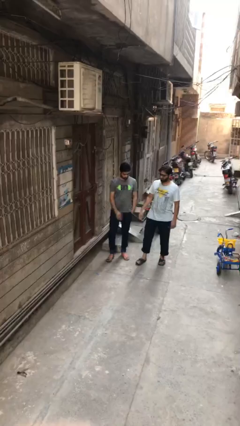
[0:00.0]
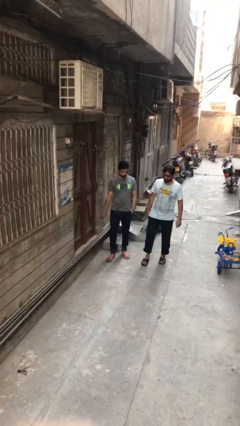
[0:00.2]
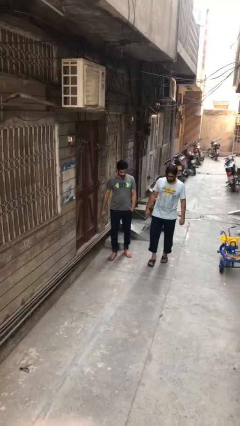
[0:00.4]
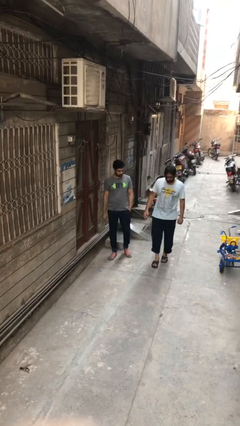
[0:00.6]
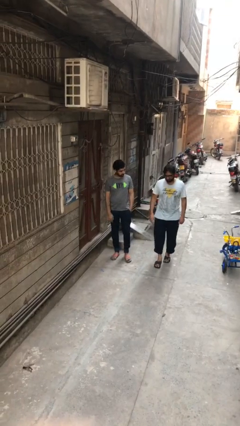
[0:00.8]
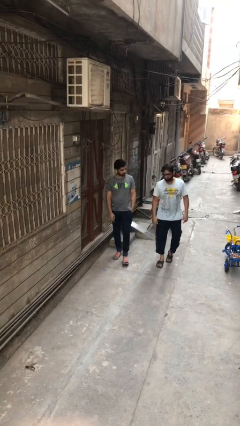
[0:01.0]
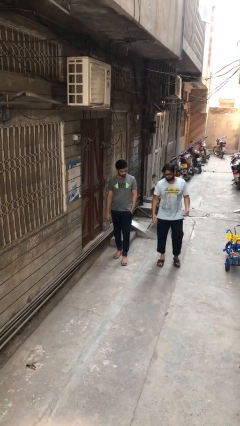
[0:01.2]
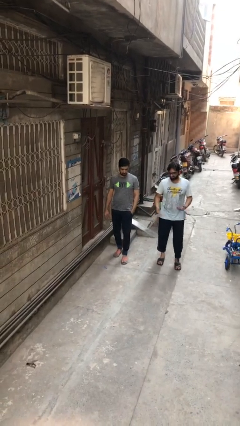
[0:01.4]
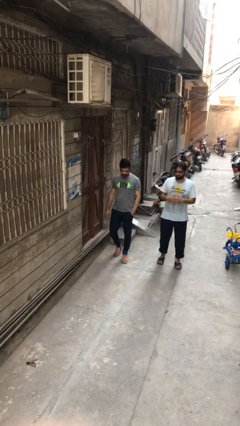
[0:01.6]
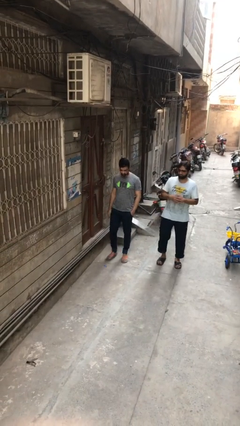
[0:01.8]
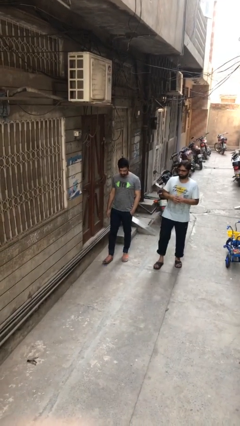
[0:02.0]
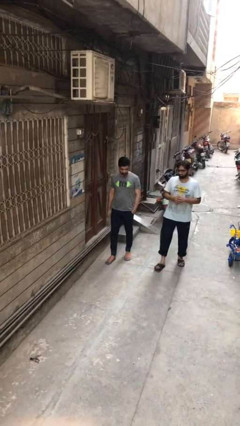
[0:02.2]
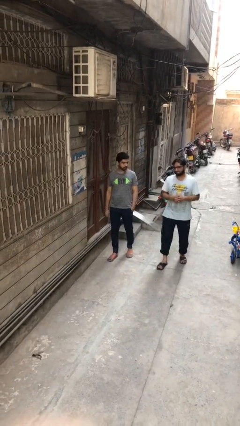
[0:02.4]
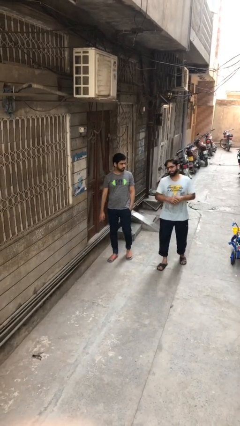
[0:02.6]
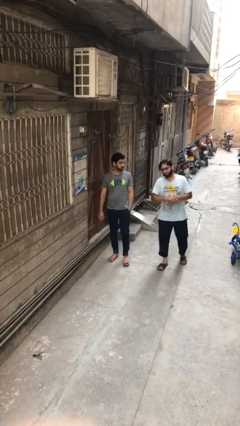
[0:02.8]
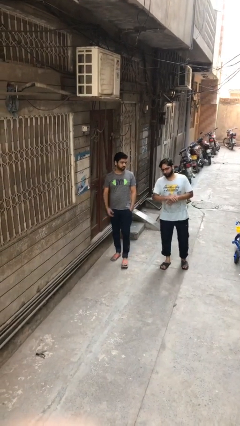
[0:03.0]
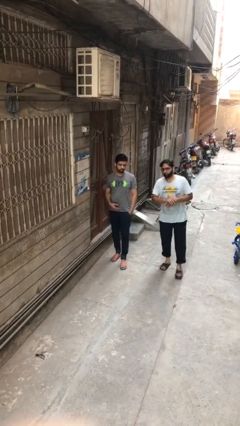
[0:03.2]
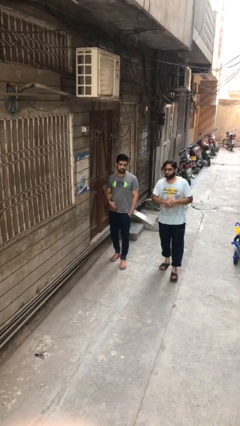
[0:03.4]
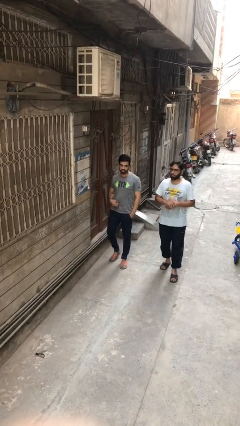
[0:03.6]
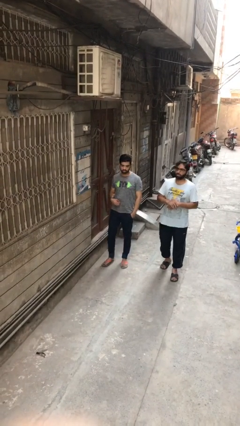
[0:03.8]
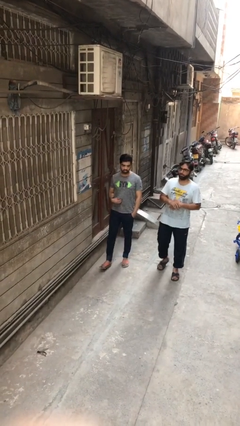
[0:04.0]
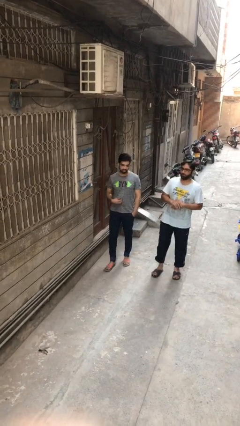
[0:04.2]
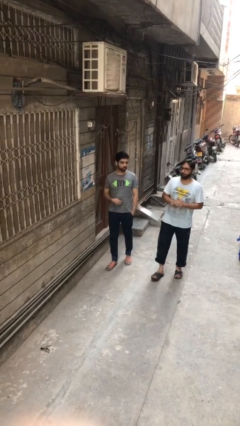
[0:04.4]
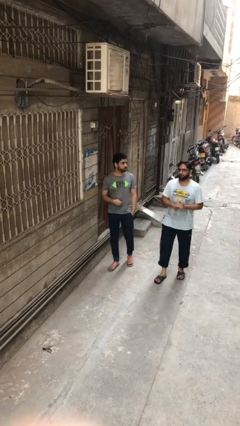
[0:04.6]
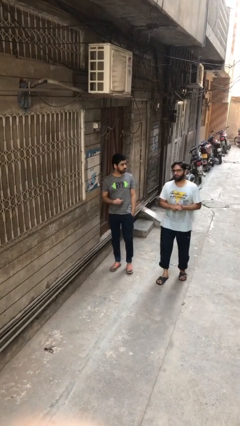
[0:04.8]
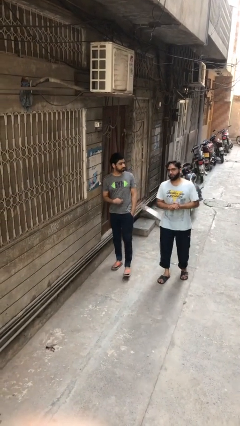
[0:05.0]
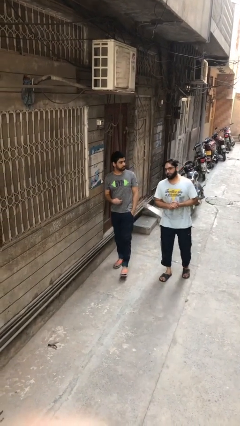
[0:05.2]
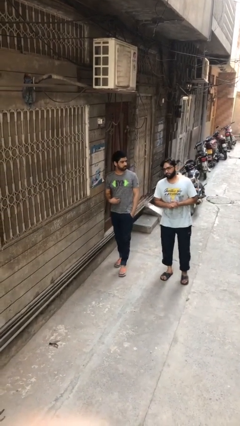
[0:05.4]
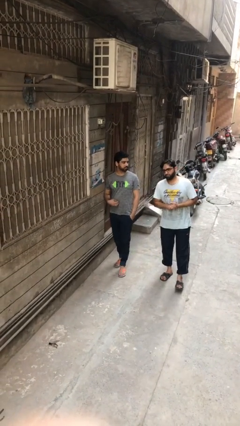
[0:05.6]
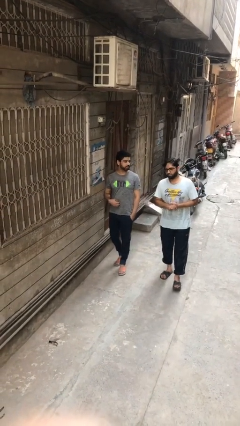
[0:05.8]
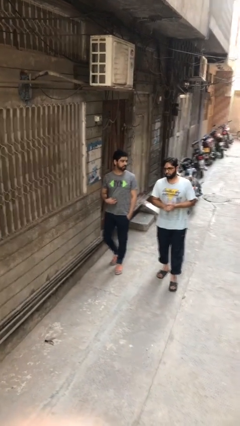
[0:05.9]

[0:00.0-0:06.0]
person talks to person

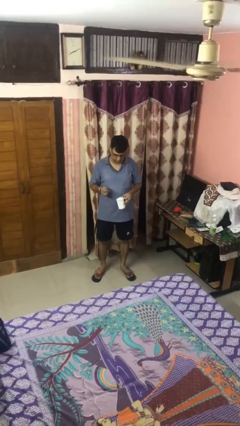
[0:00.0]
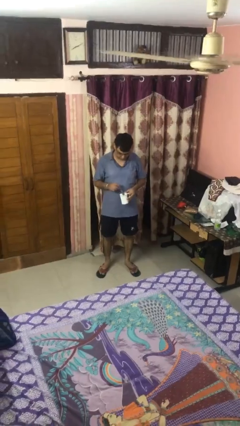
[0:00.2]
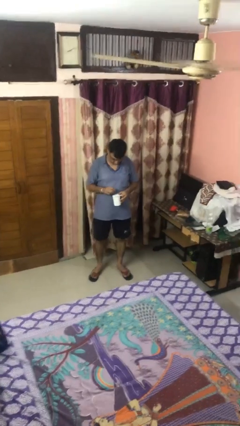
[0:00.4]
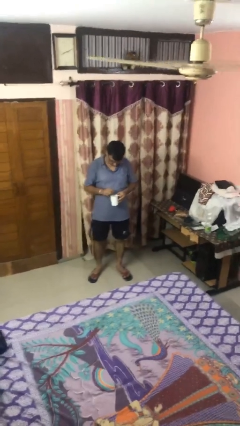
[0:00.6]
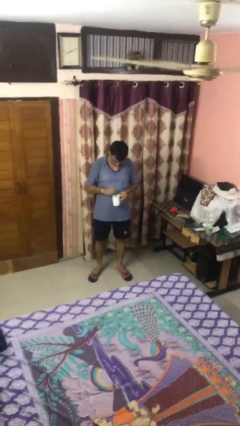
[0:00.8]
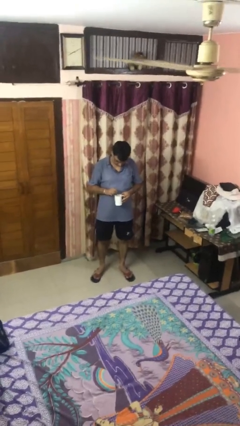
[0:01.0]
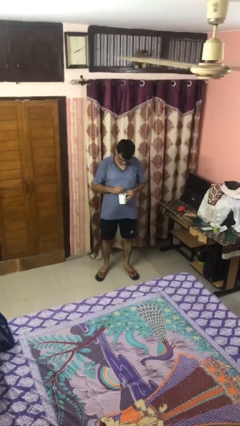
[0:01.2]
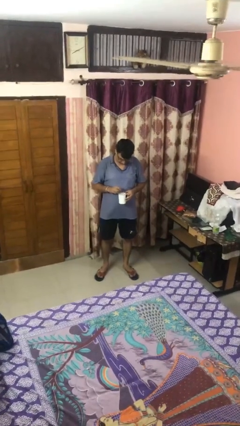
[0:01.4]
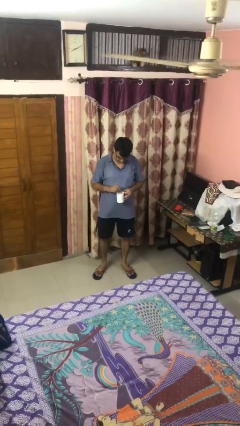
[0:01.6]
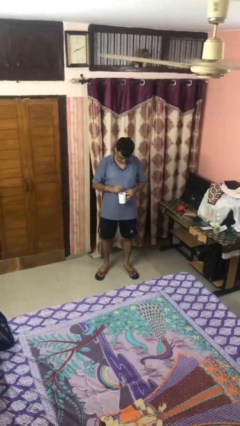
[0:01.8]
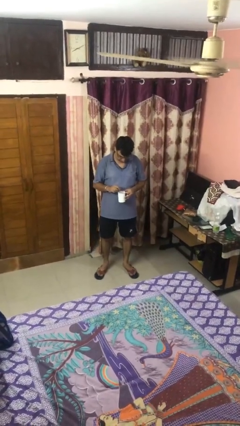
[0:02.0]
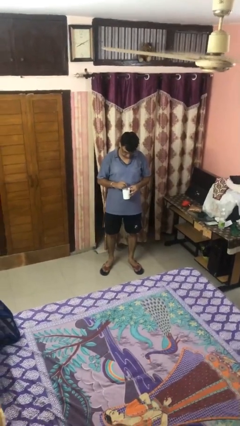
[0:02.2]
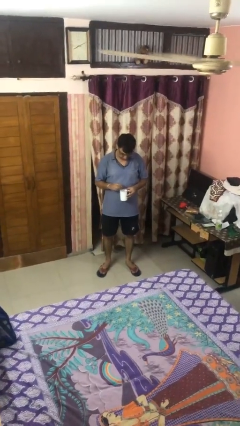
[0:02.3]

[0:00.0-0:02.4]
person stirs mug

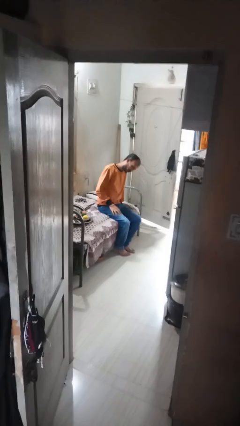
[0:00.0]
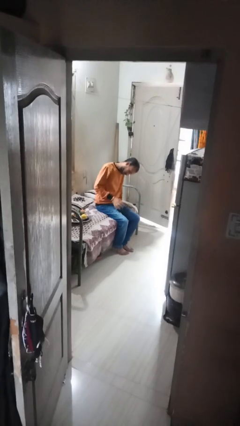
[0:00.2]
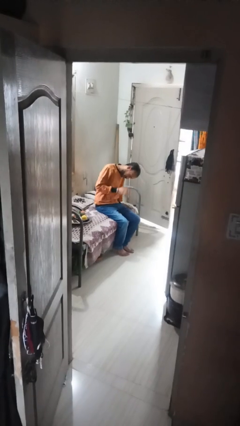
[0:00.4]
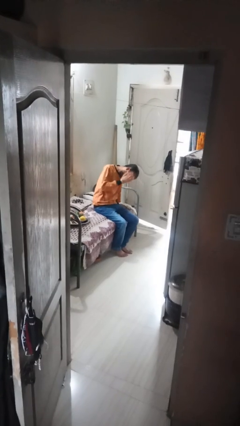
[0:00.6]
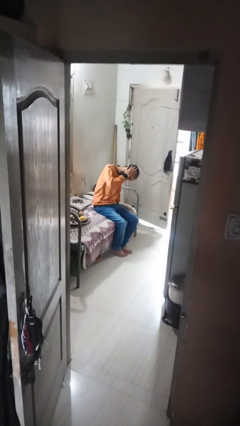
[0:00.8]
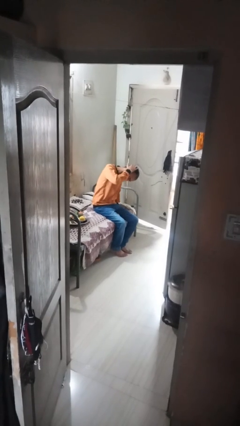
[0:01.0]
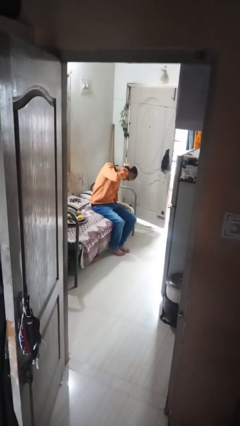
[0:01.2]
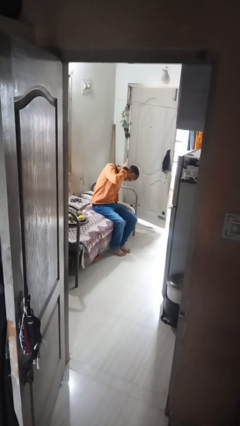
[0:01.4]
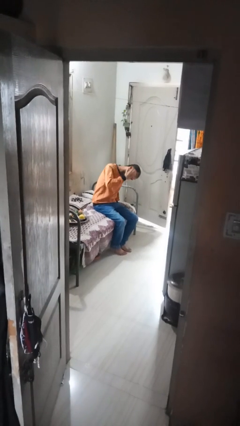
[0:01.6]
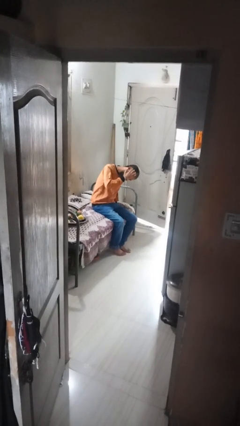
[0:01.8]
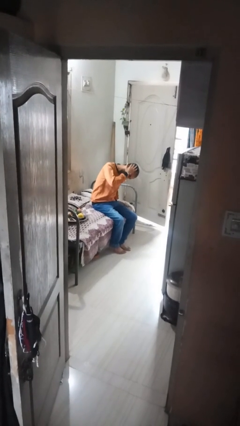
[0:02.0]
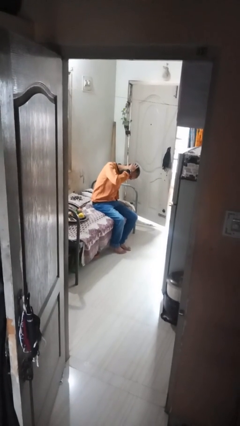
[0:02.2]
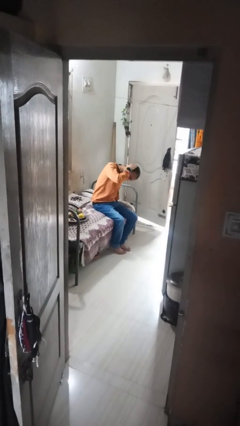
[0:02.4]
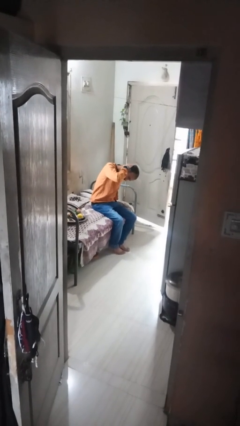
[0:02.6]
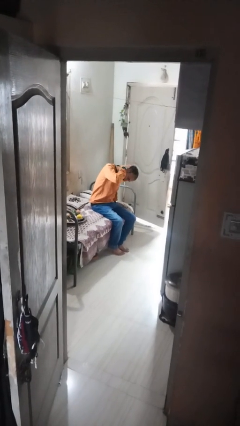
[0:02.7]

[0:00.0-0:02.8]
person strokes hair

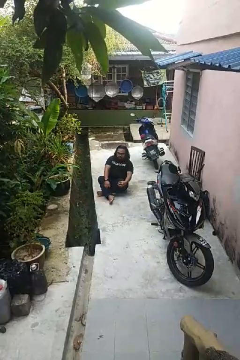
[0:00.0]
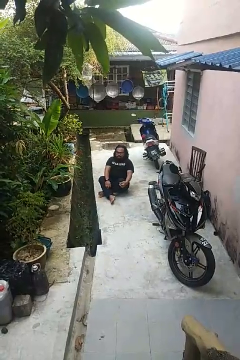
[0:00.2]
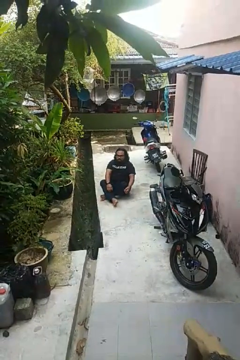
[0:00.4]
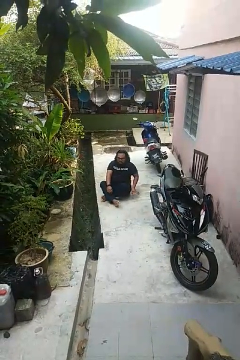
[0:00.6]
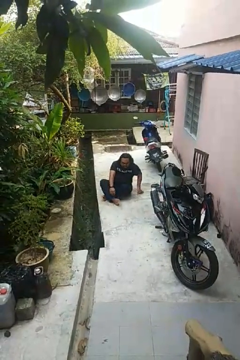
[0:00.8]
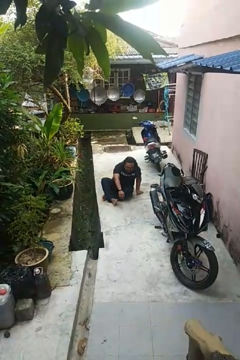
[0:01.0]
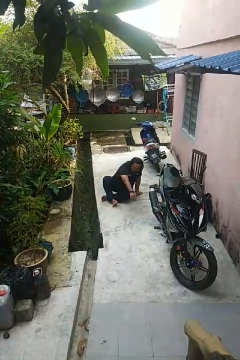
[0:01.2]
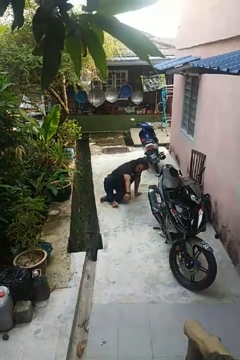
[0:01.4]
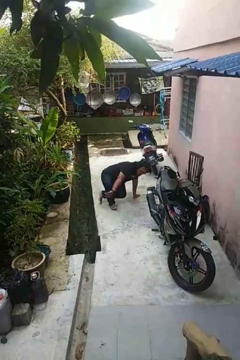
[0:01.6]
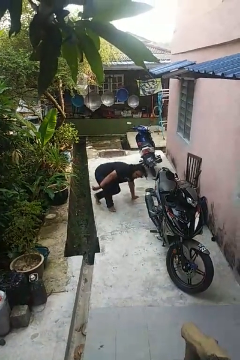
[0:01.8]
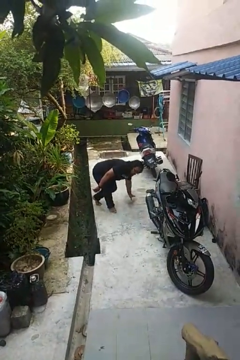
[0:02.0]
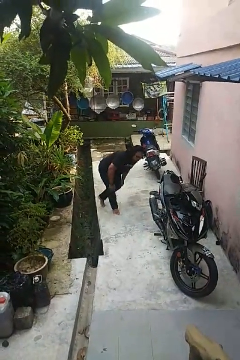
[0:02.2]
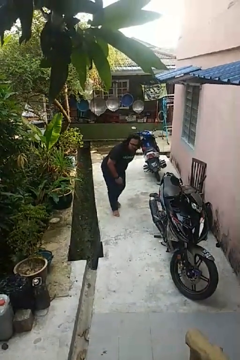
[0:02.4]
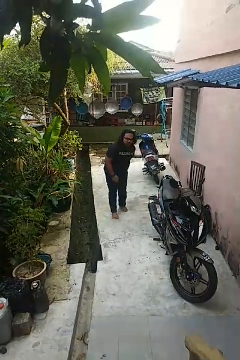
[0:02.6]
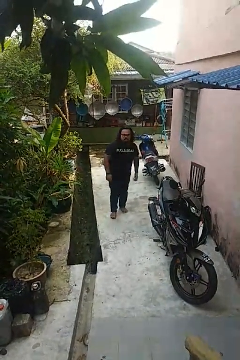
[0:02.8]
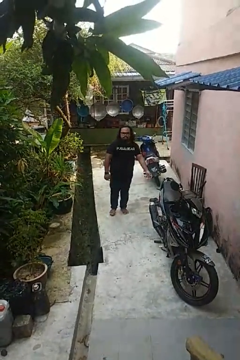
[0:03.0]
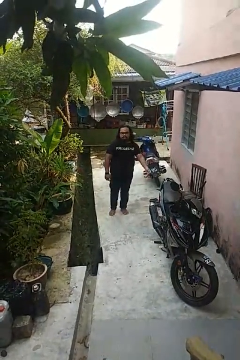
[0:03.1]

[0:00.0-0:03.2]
person stands up from floor

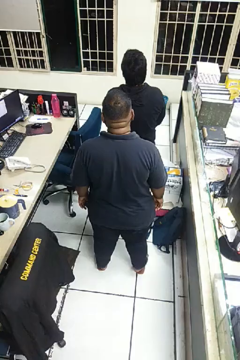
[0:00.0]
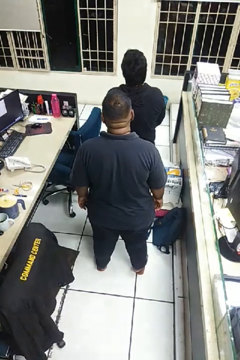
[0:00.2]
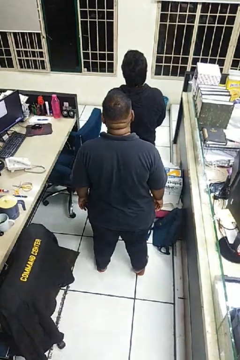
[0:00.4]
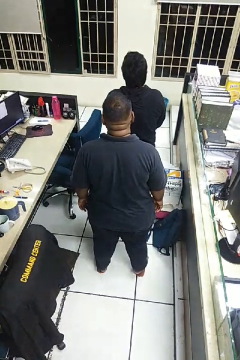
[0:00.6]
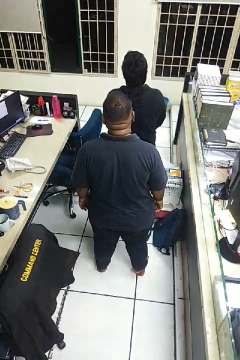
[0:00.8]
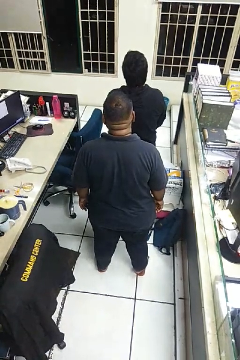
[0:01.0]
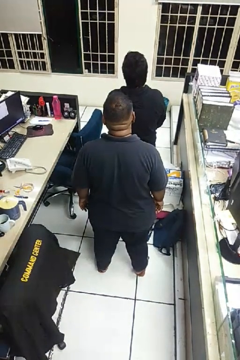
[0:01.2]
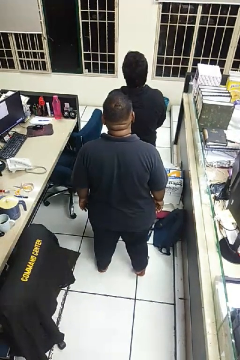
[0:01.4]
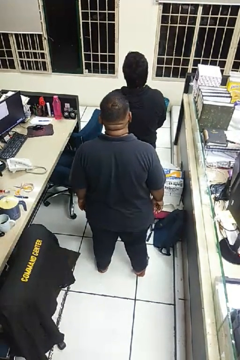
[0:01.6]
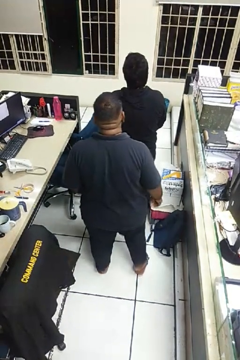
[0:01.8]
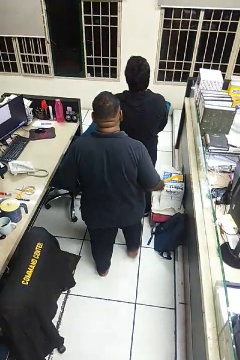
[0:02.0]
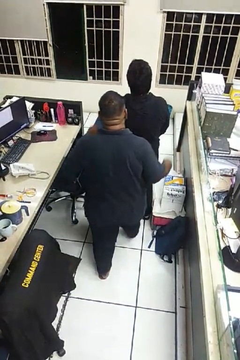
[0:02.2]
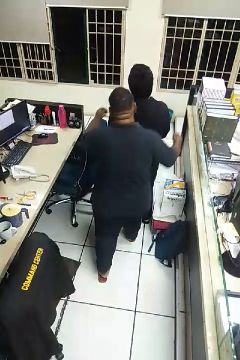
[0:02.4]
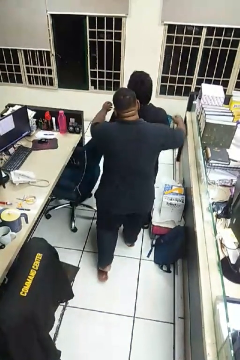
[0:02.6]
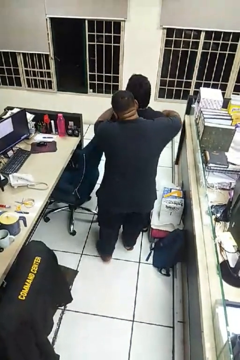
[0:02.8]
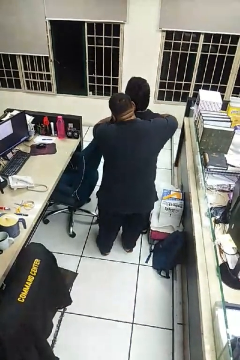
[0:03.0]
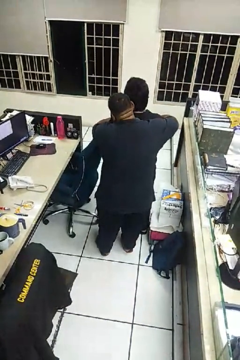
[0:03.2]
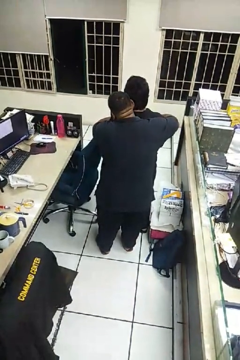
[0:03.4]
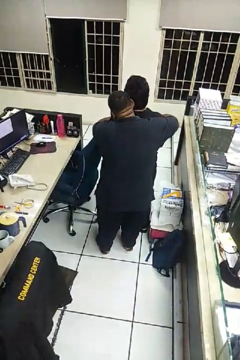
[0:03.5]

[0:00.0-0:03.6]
person hugs person from behind

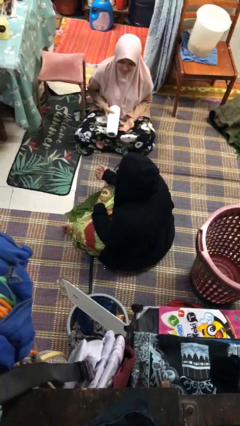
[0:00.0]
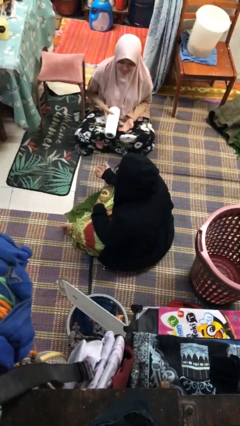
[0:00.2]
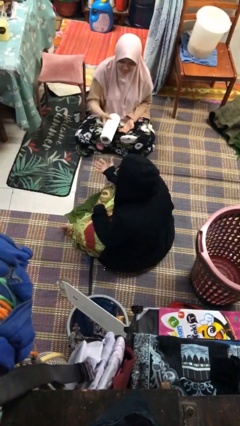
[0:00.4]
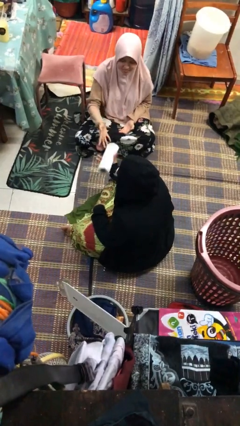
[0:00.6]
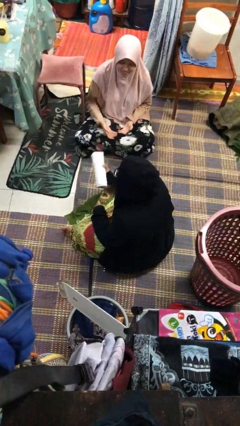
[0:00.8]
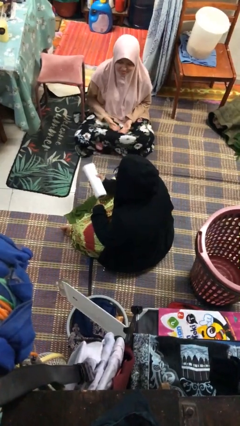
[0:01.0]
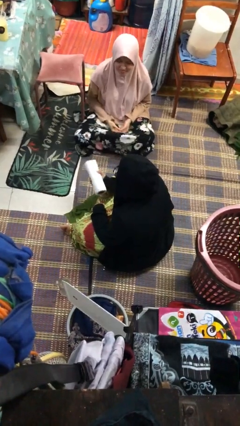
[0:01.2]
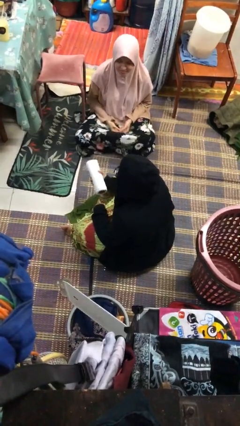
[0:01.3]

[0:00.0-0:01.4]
person catches object from person
